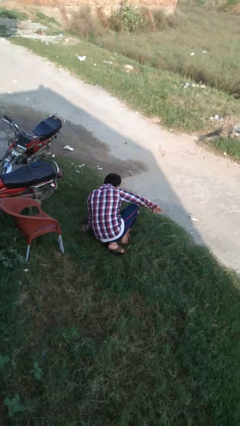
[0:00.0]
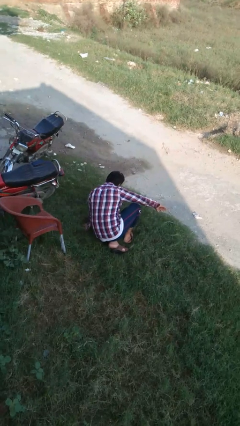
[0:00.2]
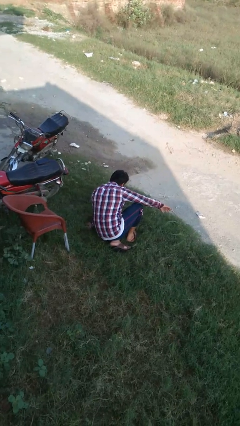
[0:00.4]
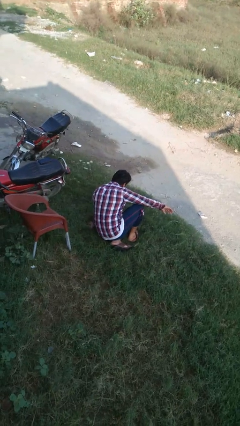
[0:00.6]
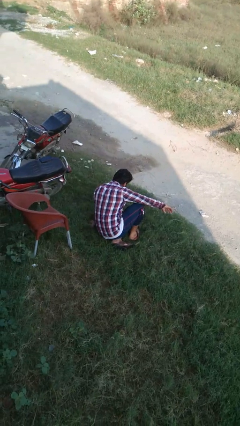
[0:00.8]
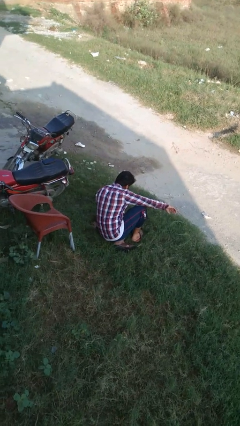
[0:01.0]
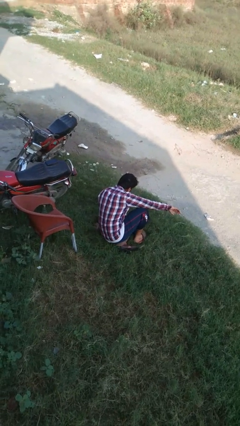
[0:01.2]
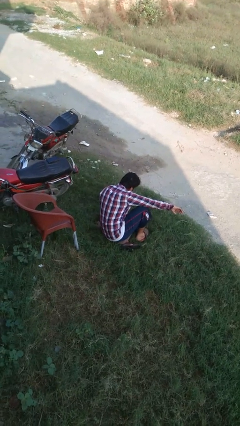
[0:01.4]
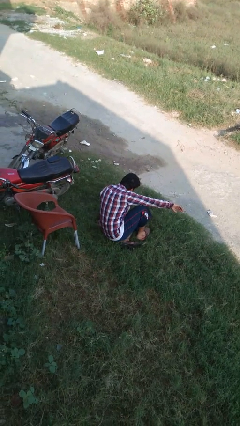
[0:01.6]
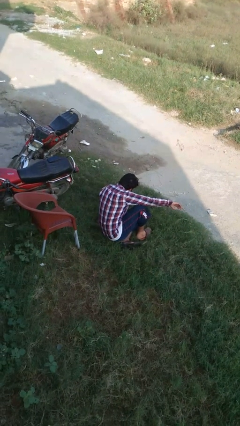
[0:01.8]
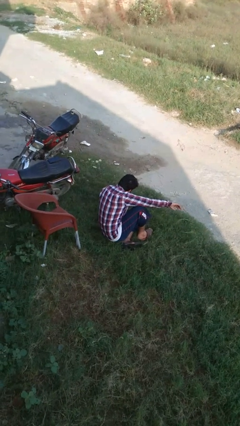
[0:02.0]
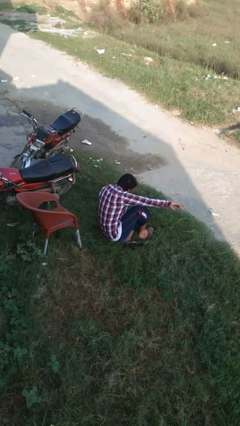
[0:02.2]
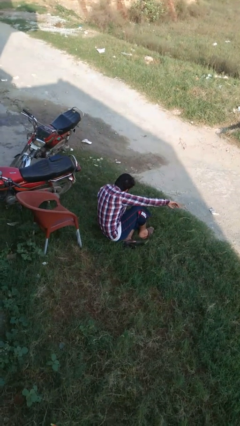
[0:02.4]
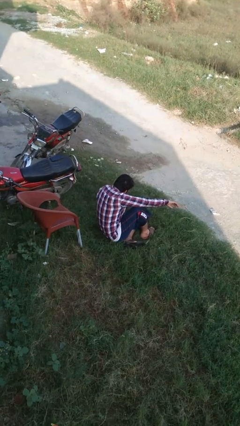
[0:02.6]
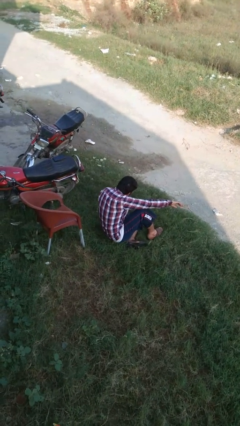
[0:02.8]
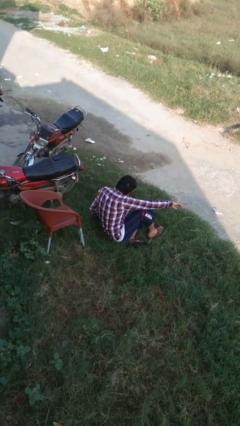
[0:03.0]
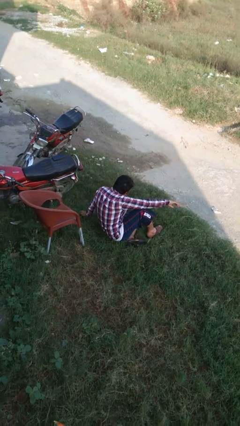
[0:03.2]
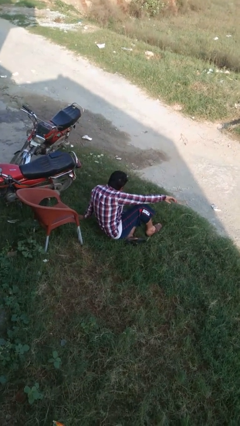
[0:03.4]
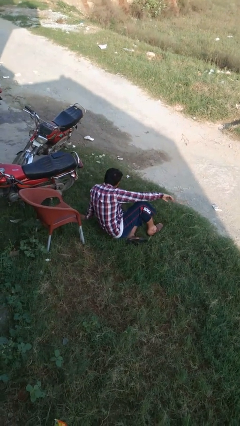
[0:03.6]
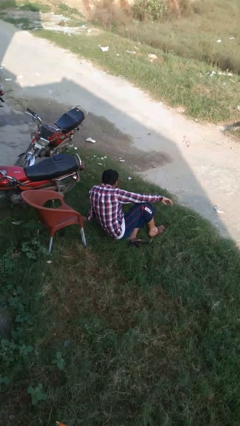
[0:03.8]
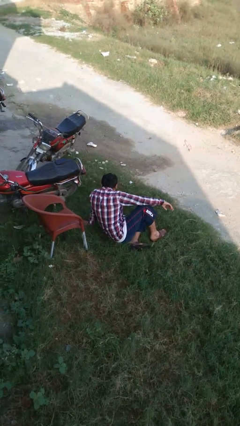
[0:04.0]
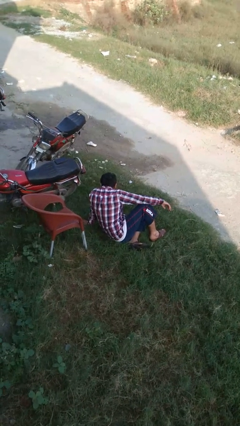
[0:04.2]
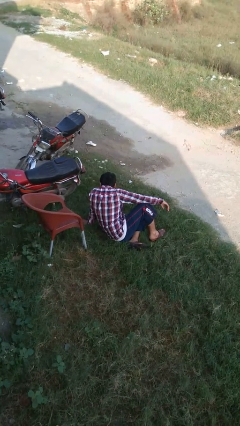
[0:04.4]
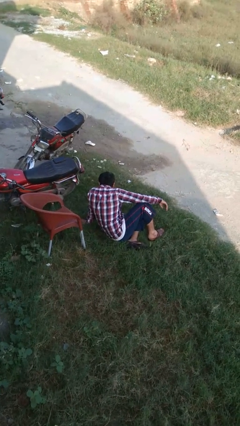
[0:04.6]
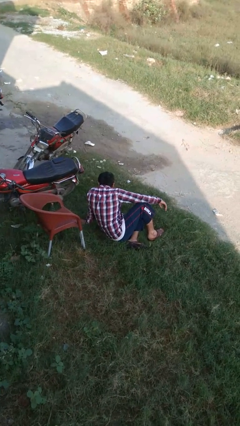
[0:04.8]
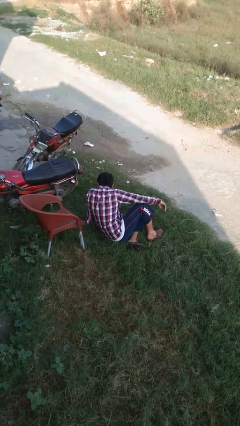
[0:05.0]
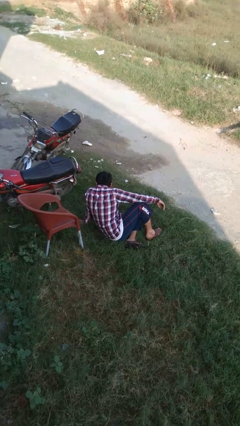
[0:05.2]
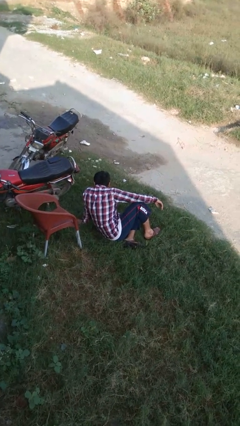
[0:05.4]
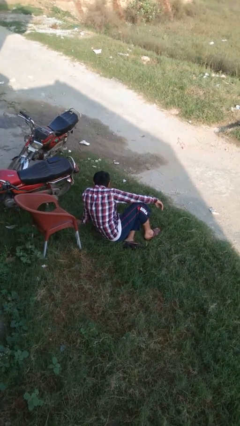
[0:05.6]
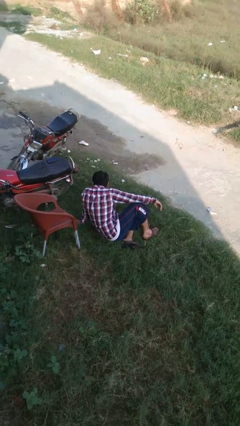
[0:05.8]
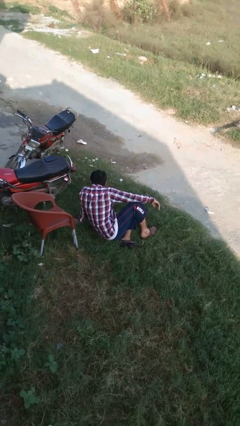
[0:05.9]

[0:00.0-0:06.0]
person lies down on floor

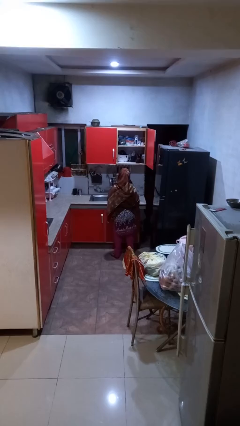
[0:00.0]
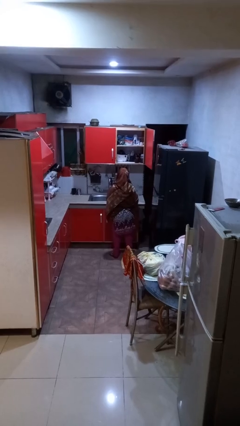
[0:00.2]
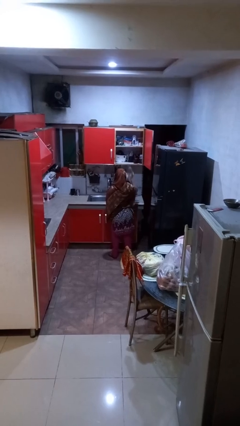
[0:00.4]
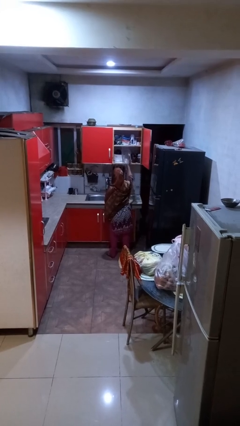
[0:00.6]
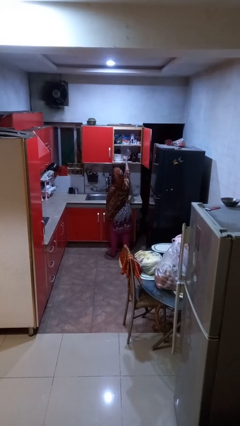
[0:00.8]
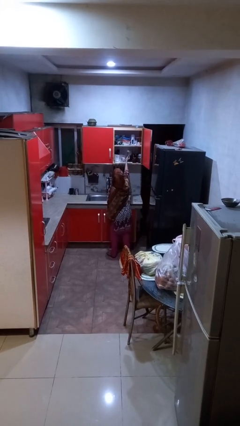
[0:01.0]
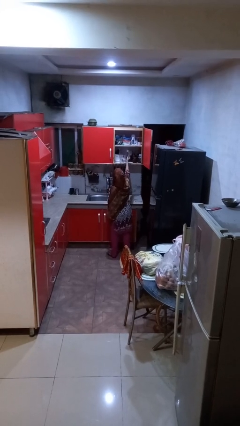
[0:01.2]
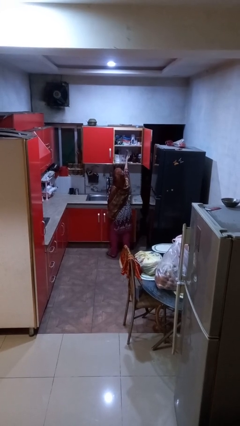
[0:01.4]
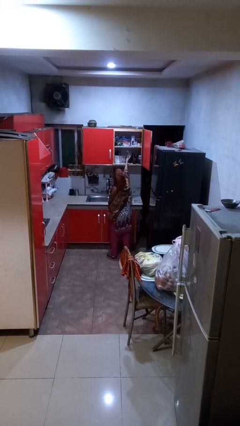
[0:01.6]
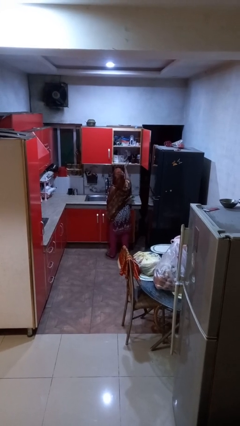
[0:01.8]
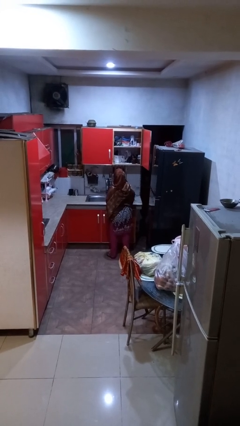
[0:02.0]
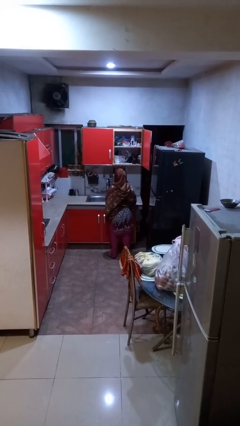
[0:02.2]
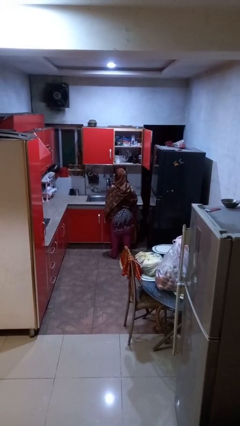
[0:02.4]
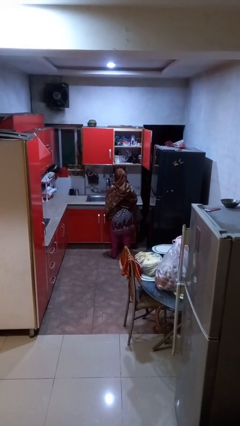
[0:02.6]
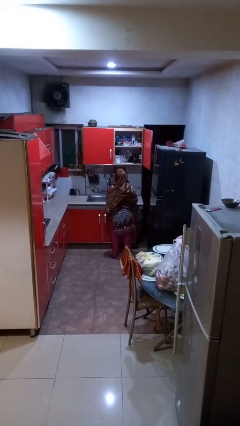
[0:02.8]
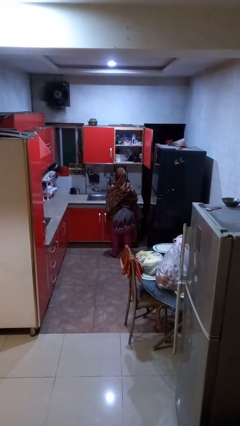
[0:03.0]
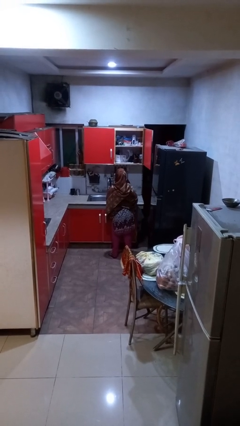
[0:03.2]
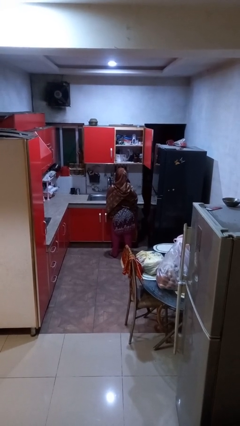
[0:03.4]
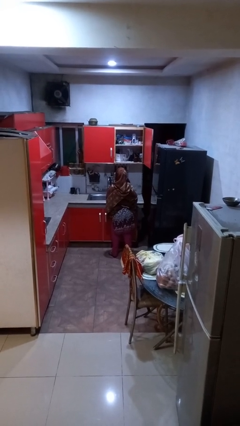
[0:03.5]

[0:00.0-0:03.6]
person puts object in cabinet

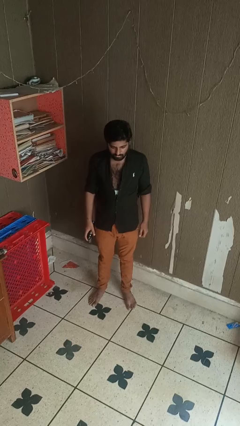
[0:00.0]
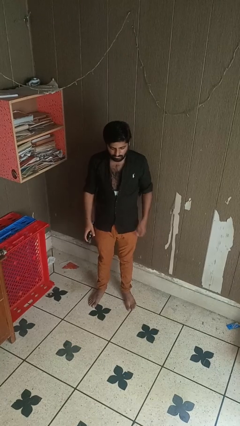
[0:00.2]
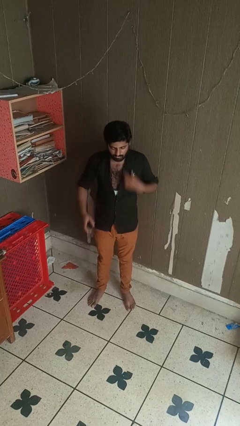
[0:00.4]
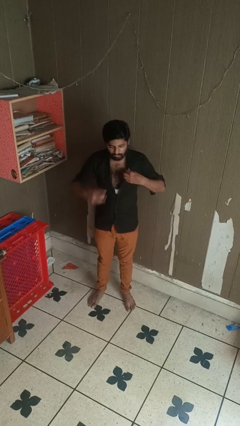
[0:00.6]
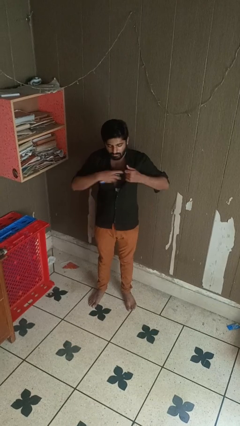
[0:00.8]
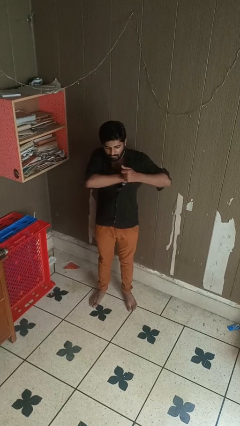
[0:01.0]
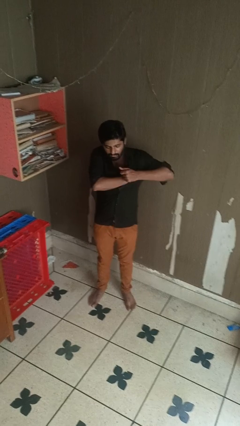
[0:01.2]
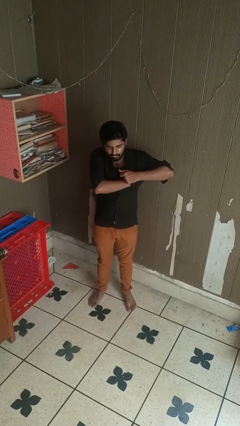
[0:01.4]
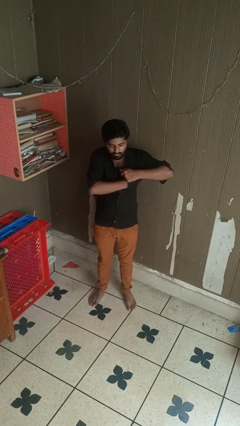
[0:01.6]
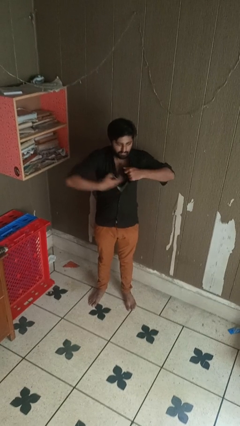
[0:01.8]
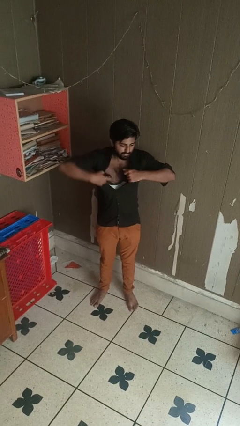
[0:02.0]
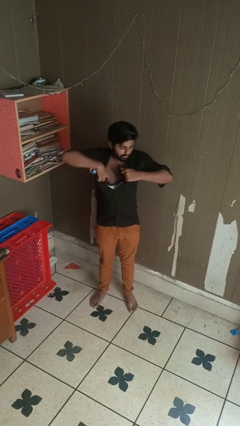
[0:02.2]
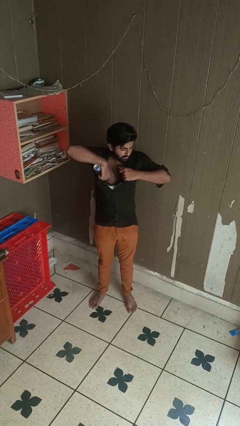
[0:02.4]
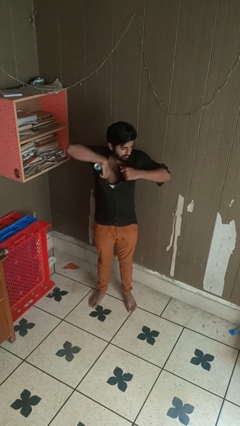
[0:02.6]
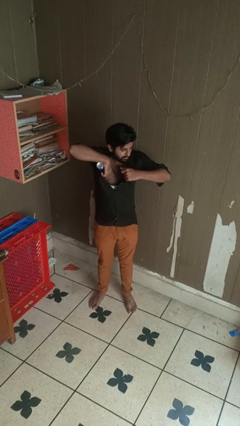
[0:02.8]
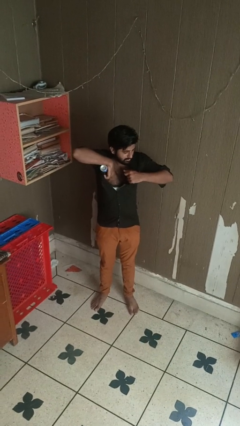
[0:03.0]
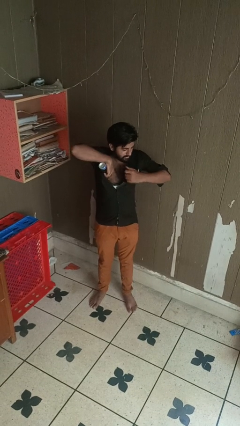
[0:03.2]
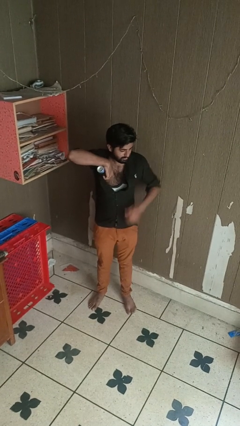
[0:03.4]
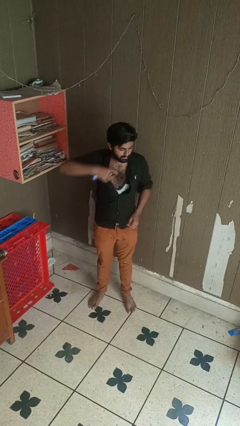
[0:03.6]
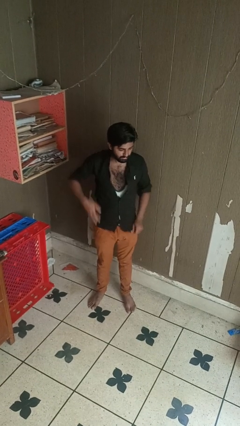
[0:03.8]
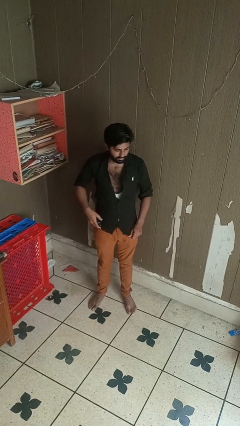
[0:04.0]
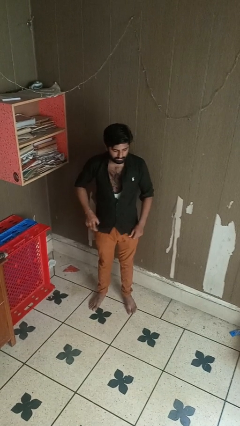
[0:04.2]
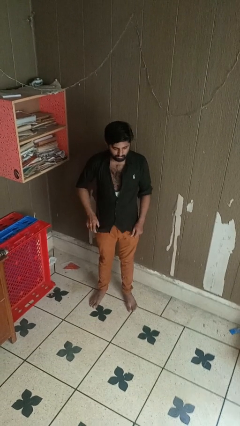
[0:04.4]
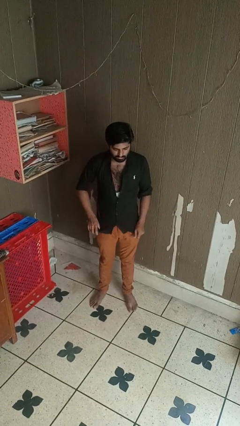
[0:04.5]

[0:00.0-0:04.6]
person applies deodorant

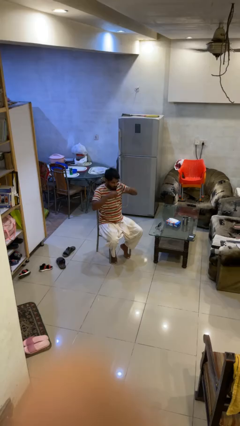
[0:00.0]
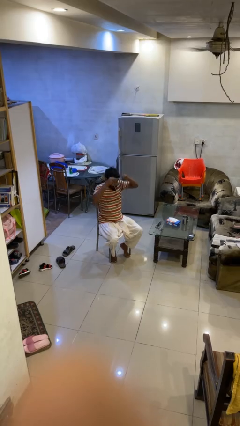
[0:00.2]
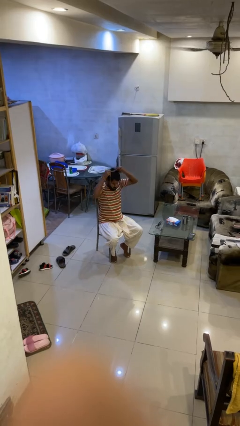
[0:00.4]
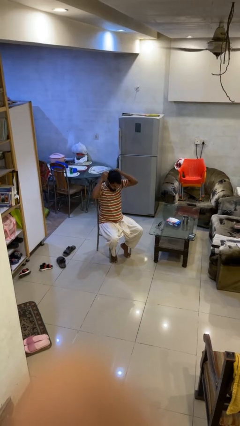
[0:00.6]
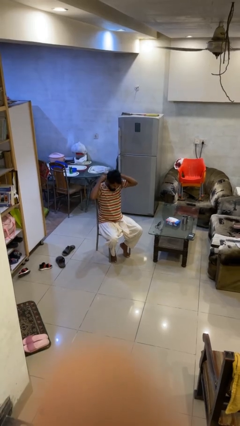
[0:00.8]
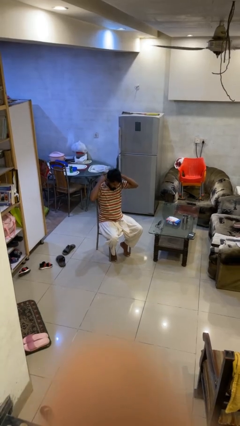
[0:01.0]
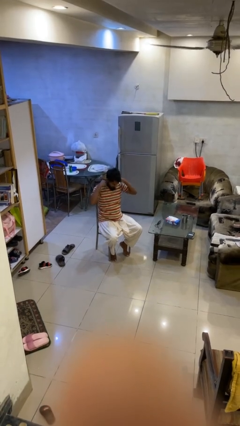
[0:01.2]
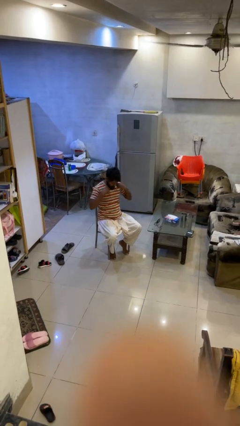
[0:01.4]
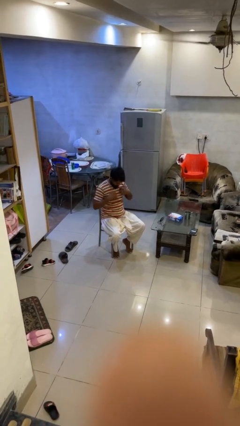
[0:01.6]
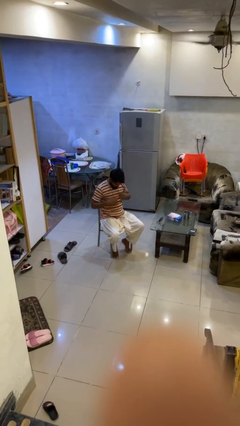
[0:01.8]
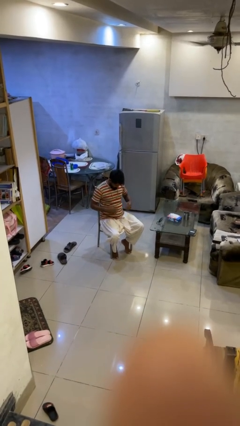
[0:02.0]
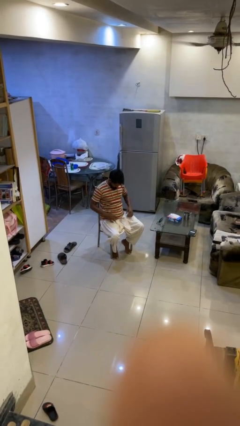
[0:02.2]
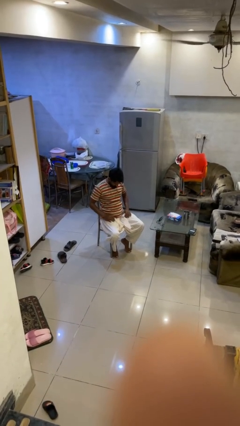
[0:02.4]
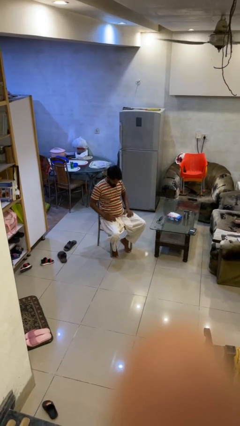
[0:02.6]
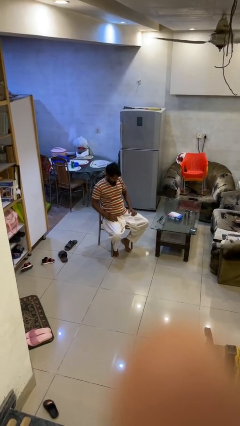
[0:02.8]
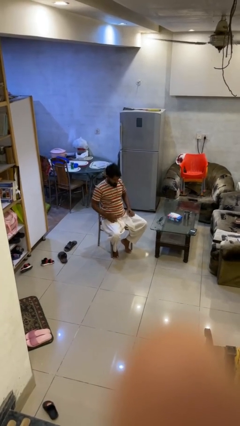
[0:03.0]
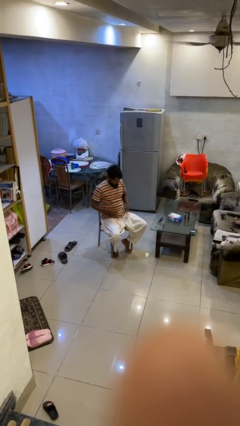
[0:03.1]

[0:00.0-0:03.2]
person puts on necklace

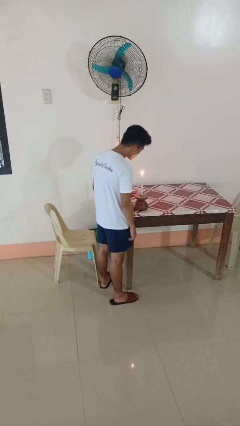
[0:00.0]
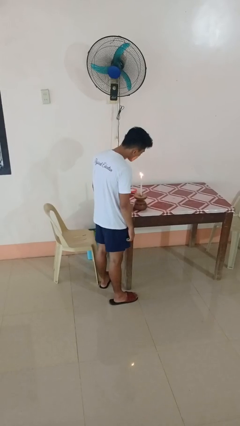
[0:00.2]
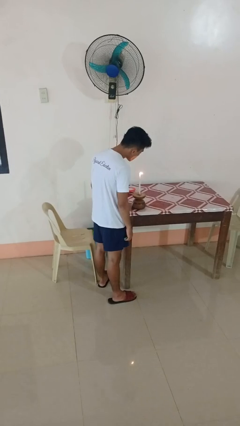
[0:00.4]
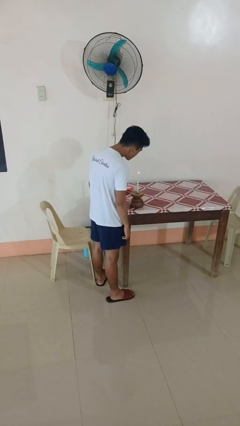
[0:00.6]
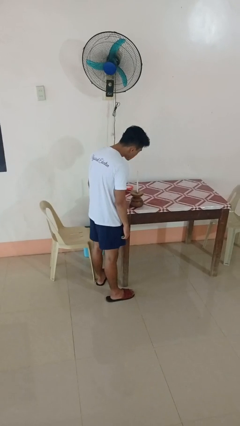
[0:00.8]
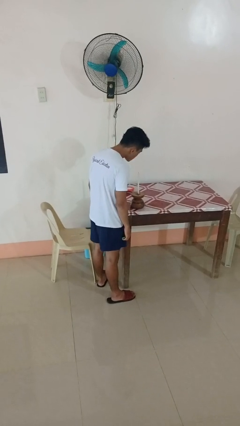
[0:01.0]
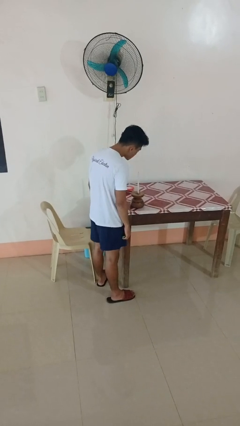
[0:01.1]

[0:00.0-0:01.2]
person extinguishes candle
